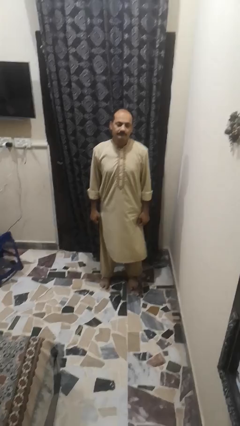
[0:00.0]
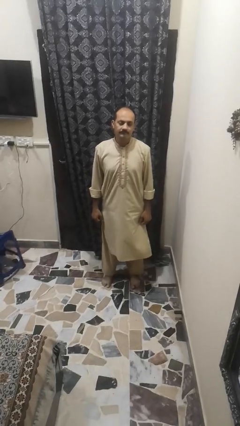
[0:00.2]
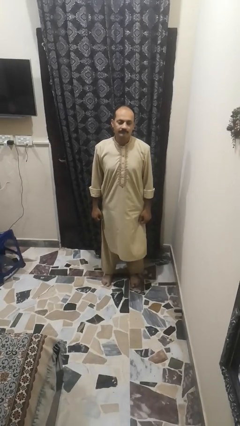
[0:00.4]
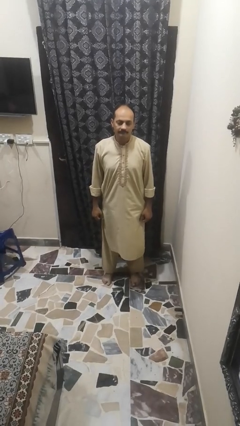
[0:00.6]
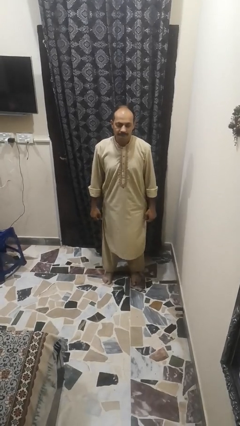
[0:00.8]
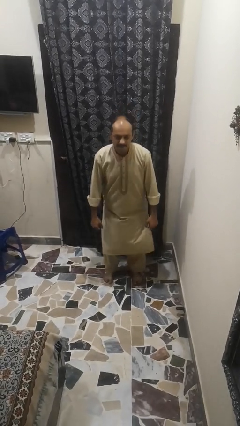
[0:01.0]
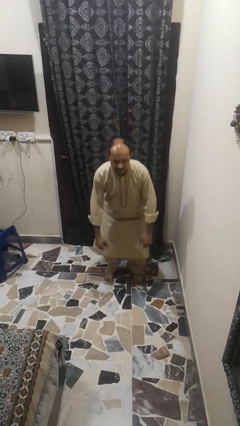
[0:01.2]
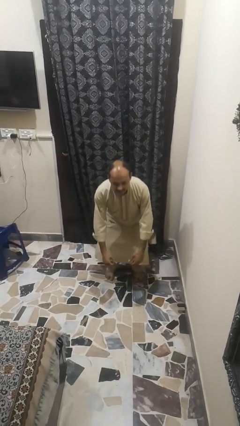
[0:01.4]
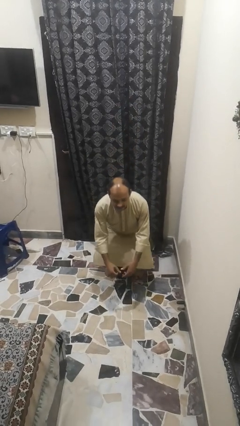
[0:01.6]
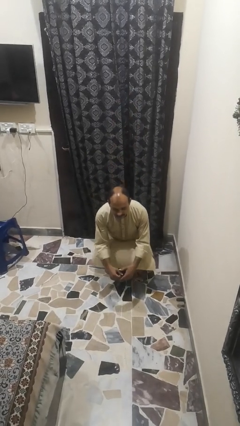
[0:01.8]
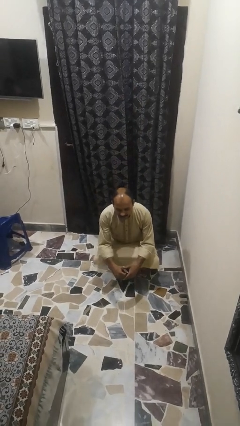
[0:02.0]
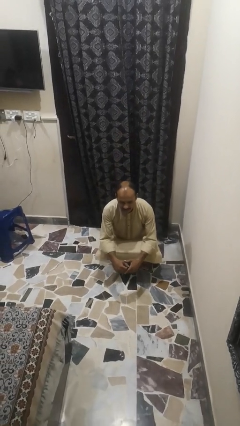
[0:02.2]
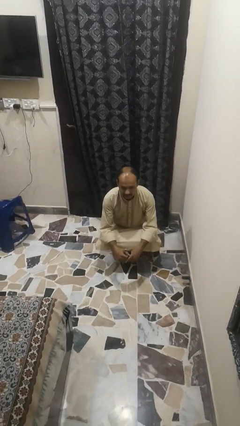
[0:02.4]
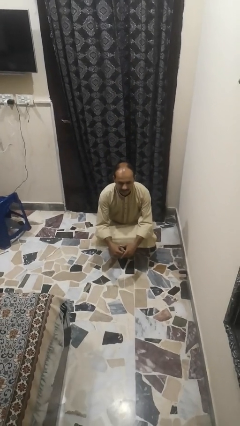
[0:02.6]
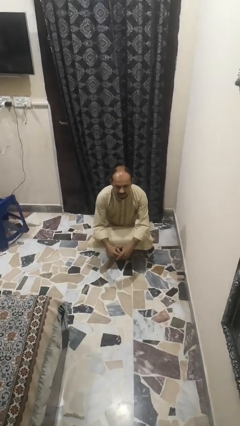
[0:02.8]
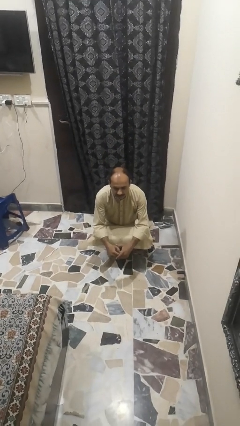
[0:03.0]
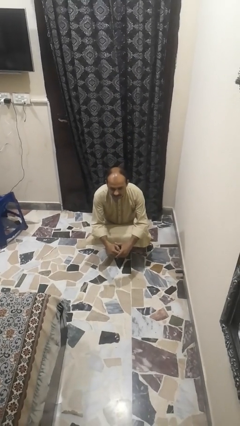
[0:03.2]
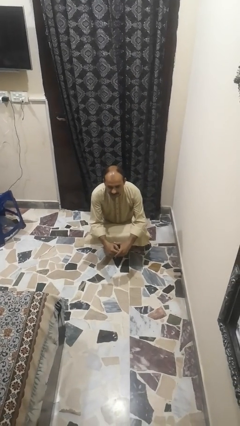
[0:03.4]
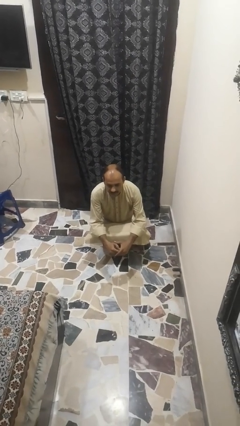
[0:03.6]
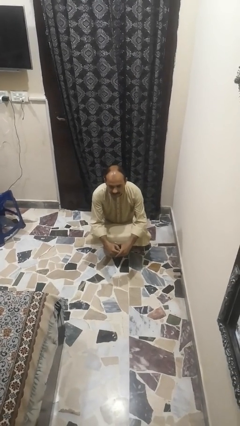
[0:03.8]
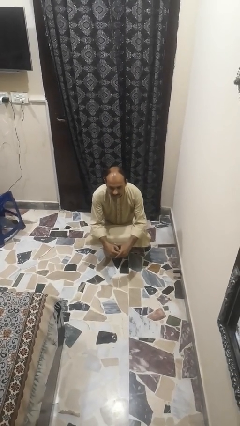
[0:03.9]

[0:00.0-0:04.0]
person squats

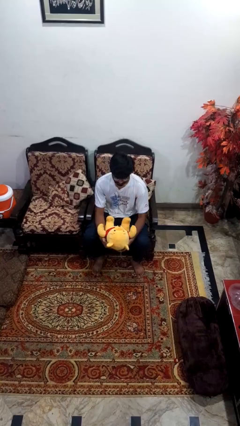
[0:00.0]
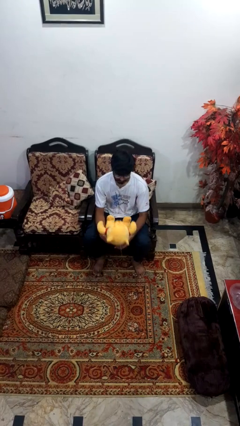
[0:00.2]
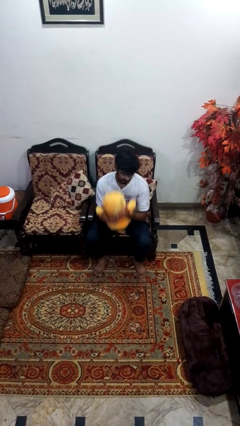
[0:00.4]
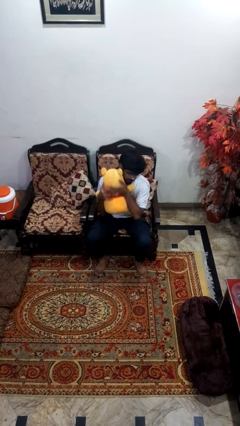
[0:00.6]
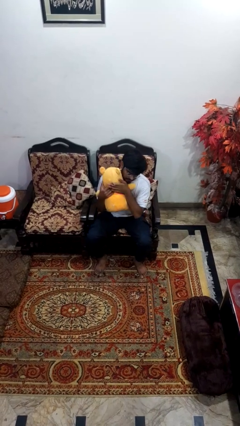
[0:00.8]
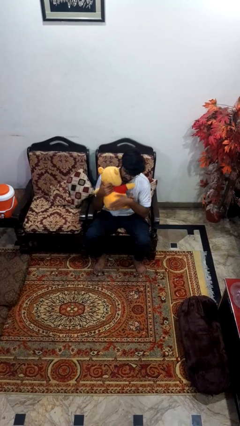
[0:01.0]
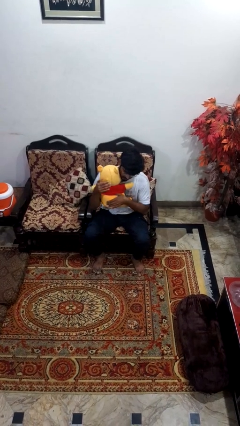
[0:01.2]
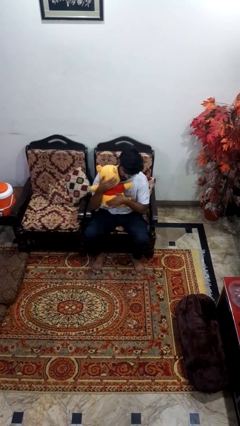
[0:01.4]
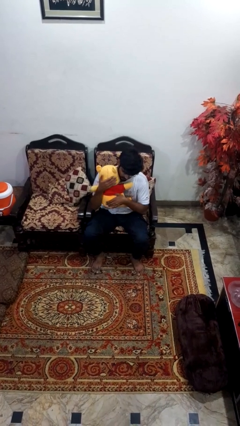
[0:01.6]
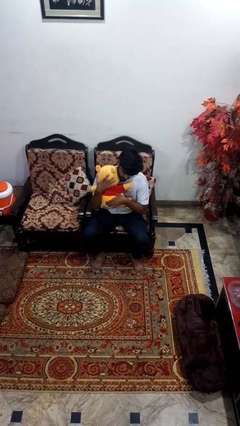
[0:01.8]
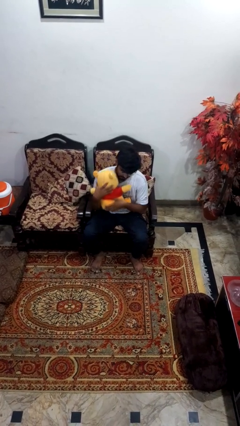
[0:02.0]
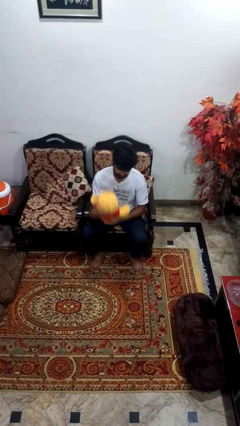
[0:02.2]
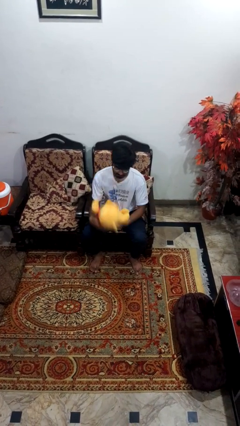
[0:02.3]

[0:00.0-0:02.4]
person hugs stuffed animal

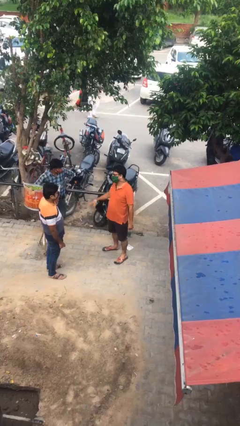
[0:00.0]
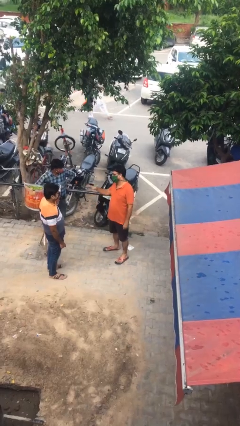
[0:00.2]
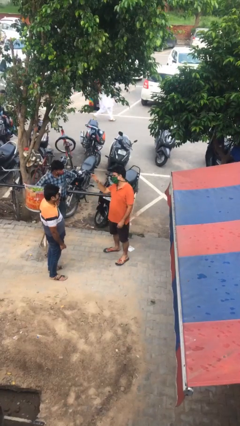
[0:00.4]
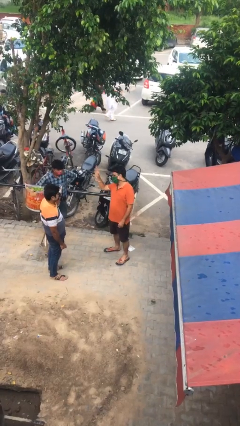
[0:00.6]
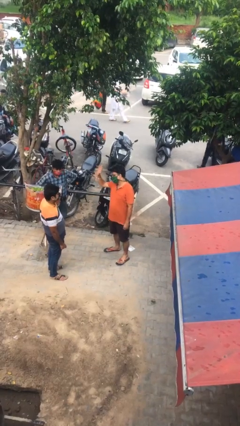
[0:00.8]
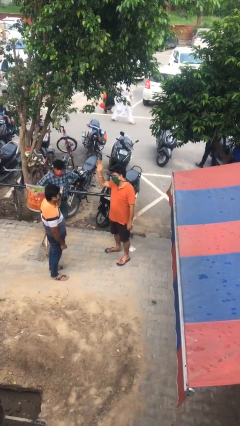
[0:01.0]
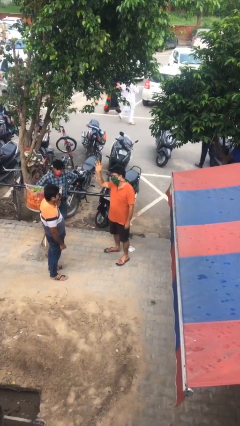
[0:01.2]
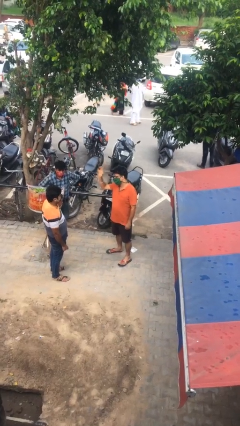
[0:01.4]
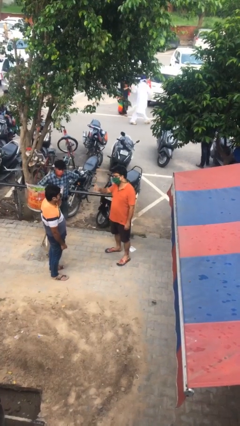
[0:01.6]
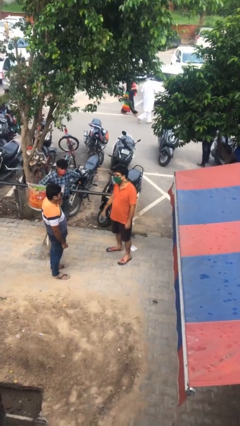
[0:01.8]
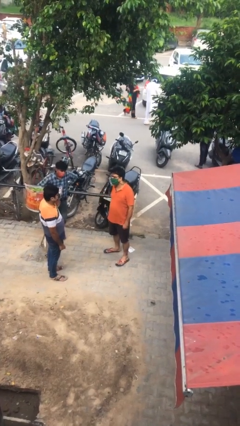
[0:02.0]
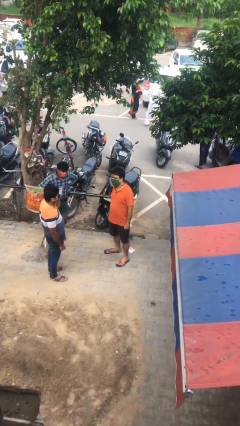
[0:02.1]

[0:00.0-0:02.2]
person waves at person

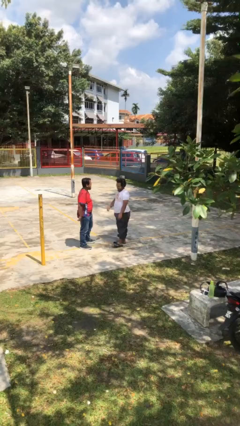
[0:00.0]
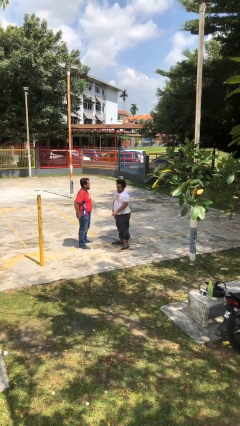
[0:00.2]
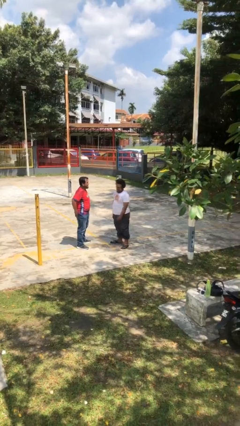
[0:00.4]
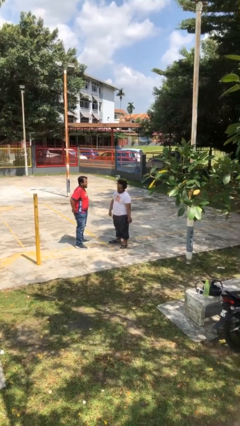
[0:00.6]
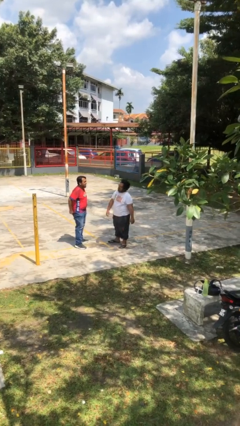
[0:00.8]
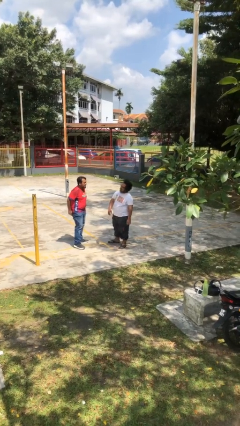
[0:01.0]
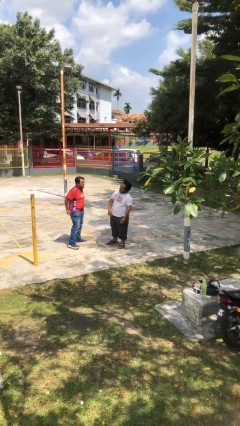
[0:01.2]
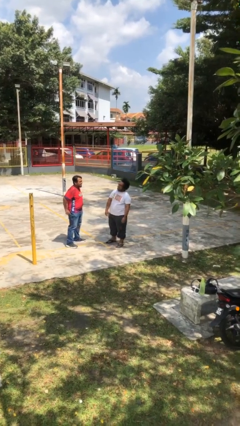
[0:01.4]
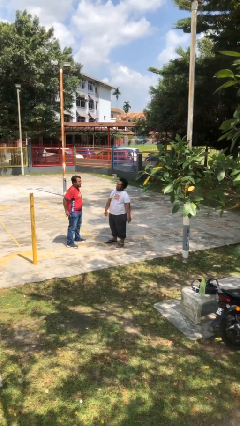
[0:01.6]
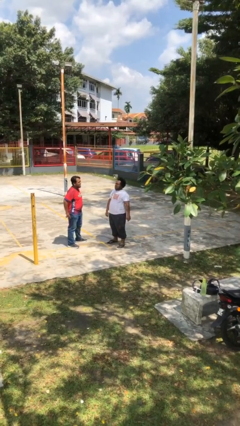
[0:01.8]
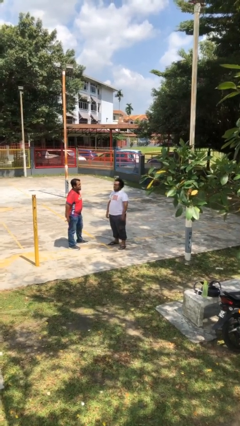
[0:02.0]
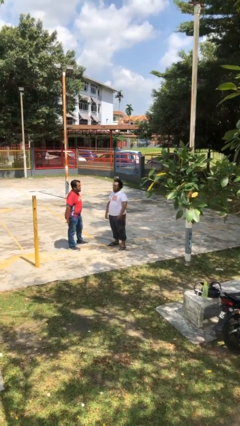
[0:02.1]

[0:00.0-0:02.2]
person talks to person

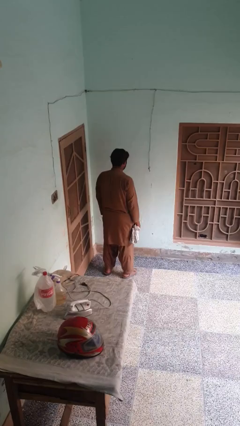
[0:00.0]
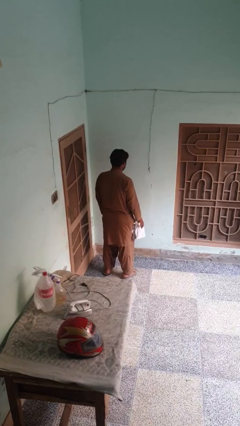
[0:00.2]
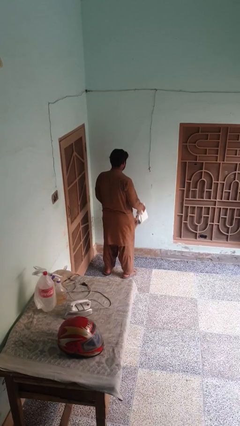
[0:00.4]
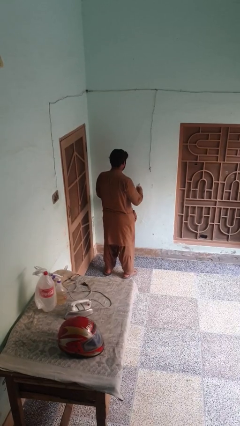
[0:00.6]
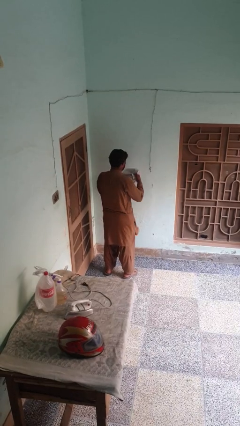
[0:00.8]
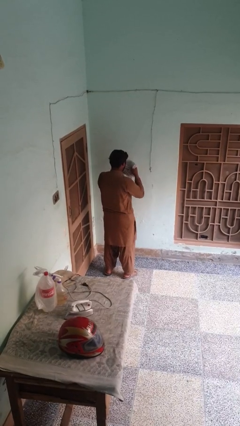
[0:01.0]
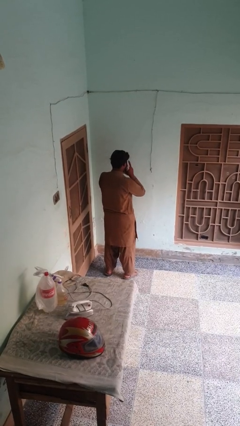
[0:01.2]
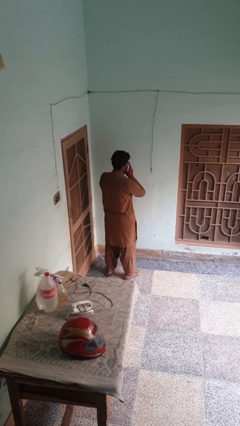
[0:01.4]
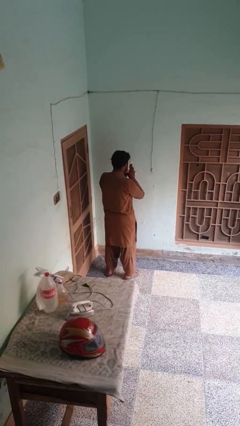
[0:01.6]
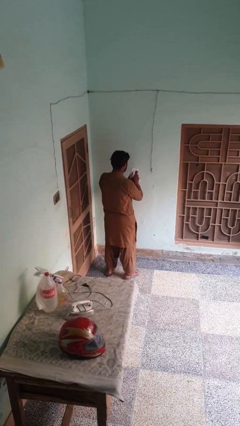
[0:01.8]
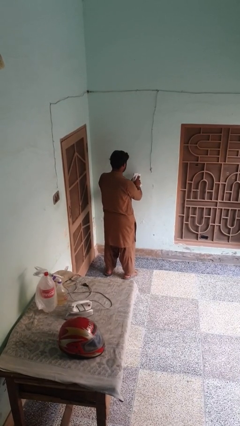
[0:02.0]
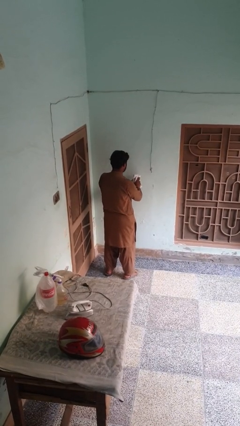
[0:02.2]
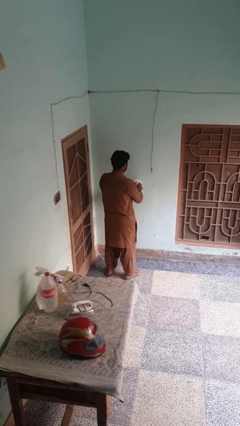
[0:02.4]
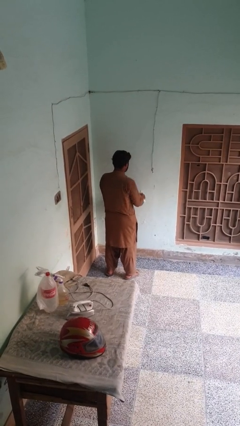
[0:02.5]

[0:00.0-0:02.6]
person blows nose

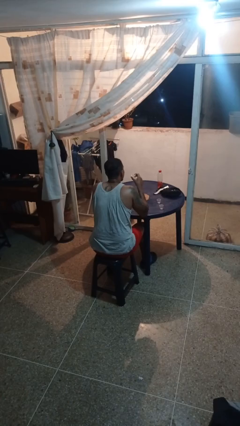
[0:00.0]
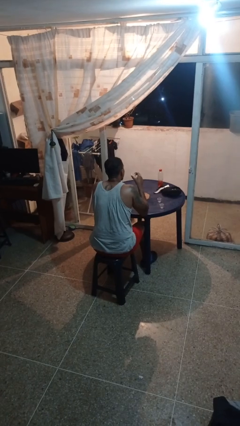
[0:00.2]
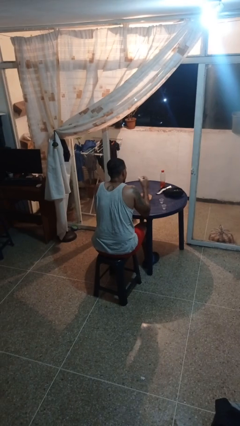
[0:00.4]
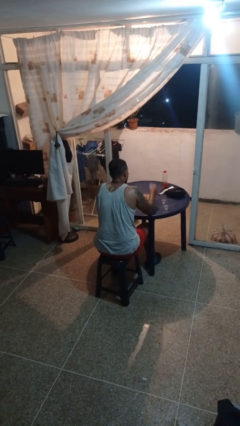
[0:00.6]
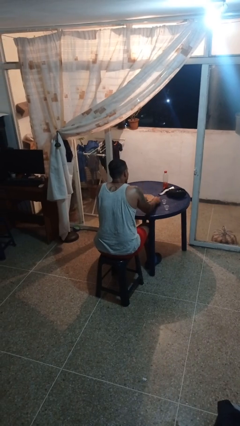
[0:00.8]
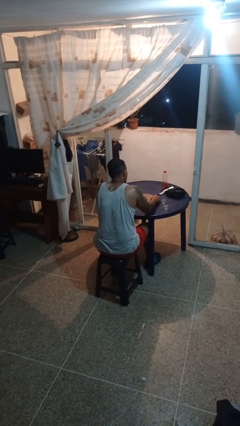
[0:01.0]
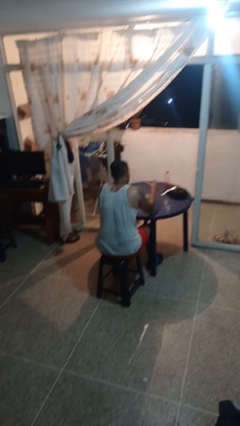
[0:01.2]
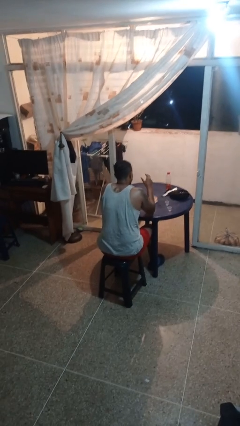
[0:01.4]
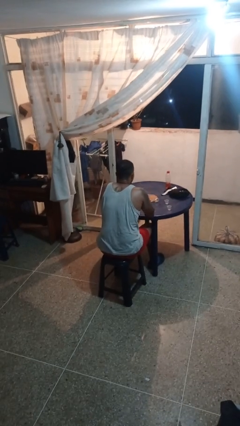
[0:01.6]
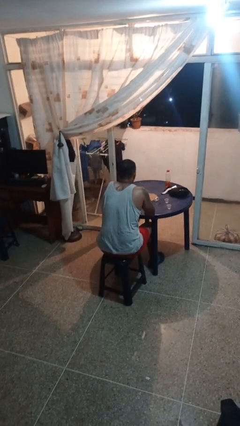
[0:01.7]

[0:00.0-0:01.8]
person puts down object on table

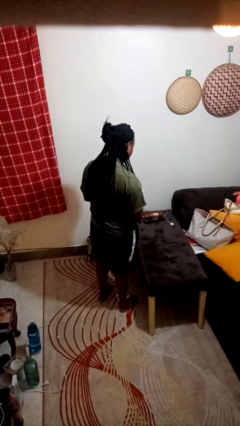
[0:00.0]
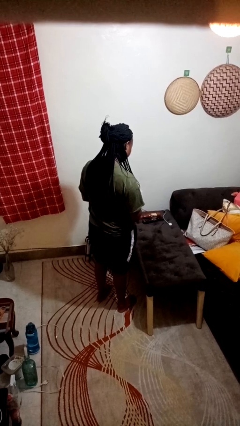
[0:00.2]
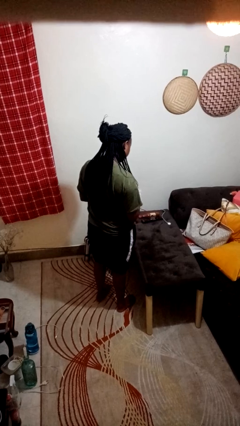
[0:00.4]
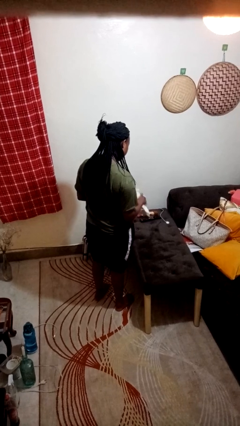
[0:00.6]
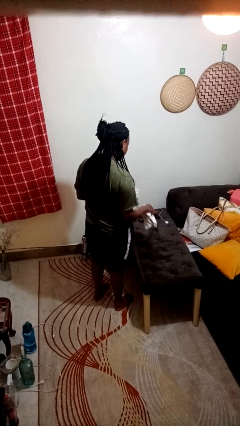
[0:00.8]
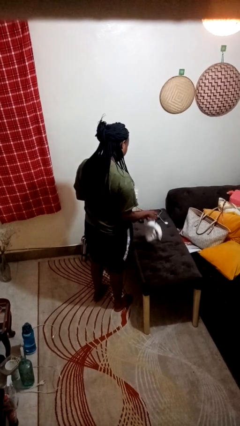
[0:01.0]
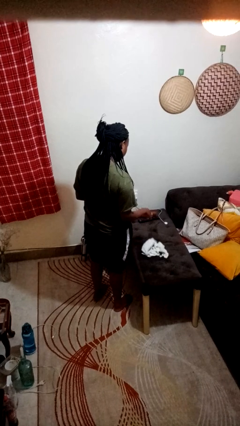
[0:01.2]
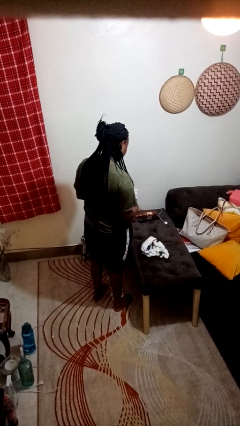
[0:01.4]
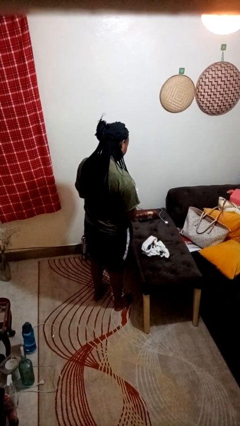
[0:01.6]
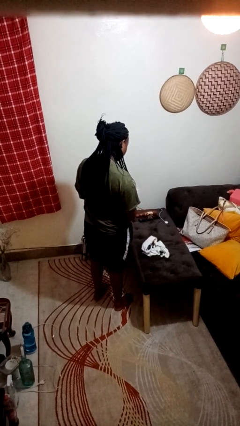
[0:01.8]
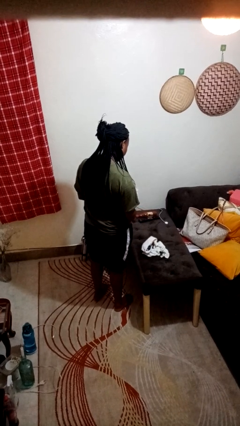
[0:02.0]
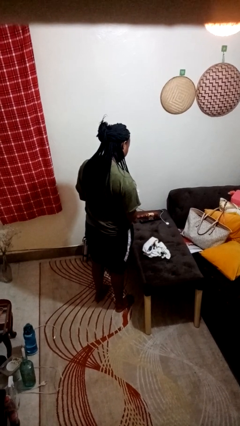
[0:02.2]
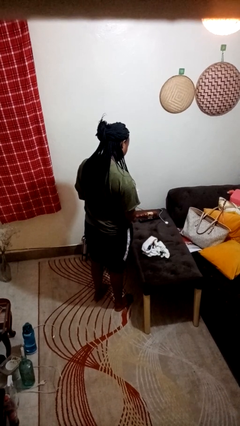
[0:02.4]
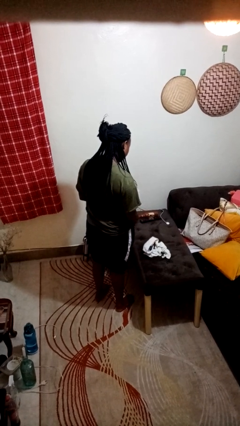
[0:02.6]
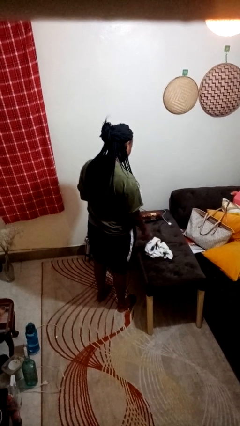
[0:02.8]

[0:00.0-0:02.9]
person throws object on table
